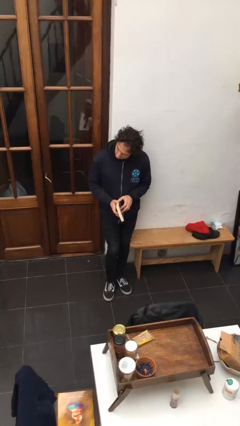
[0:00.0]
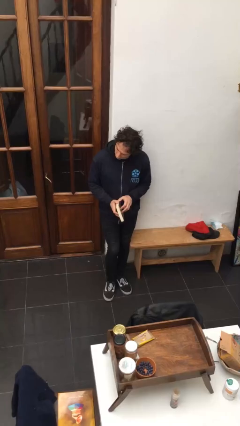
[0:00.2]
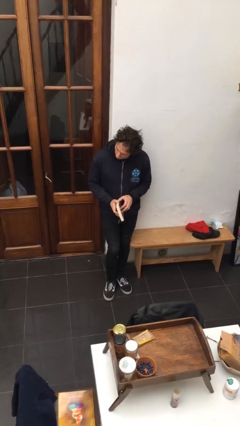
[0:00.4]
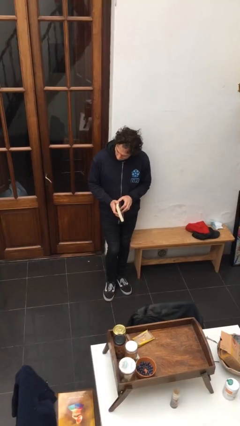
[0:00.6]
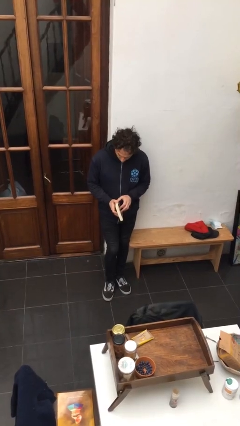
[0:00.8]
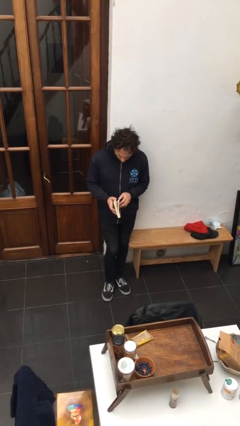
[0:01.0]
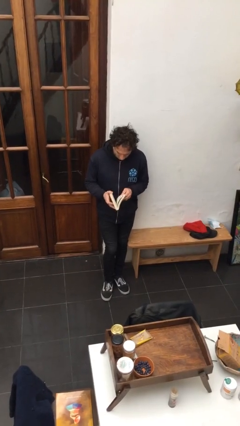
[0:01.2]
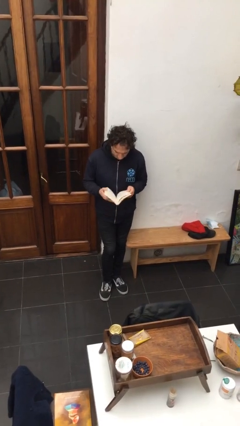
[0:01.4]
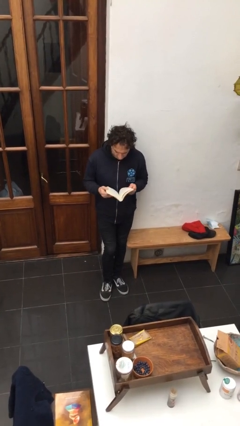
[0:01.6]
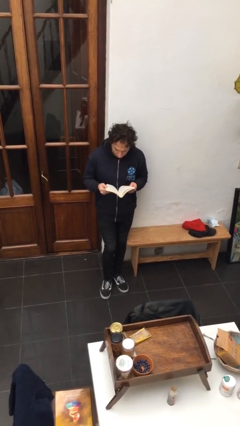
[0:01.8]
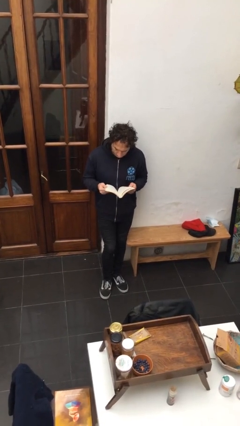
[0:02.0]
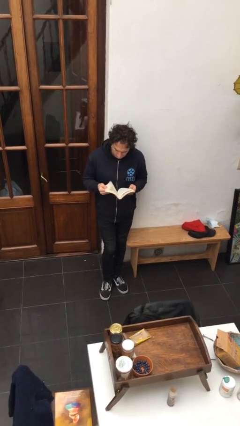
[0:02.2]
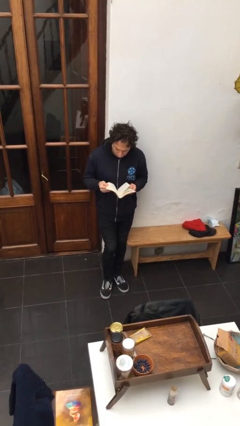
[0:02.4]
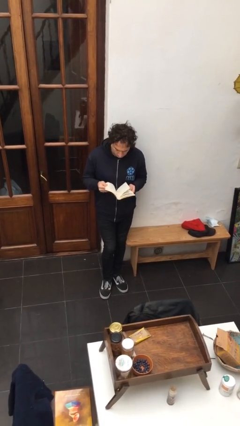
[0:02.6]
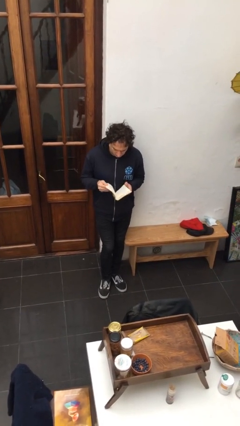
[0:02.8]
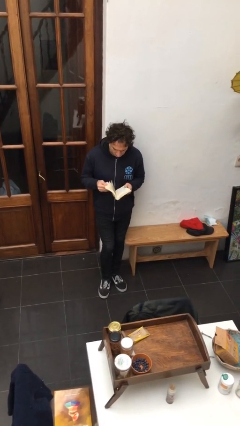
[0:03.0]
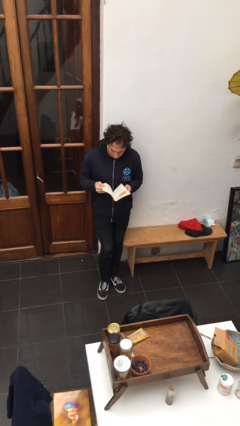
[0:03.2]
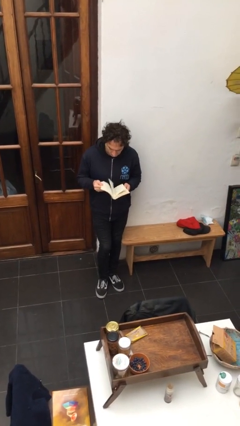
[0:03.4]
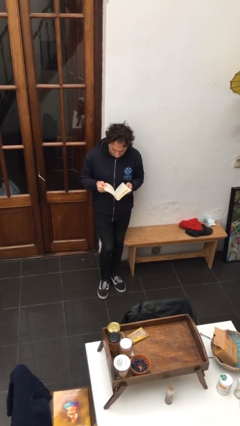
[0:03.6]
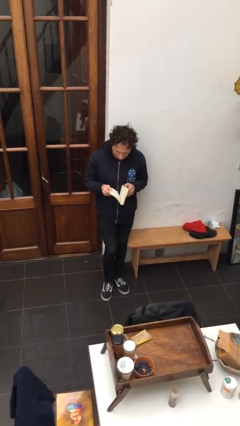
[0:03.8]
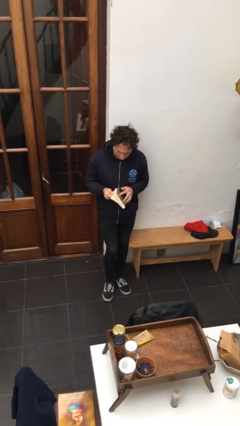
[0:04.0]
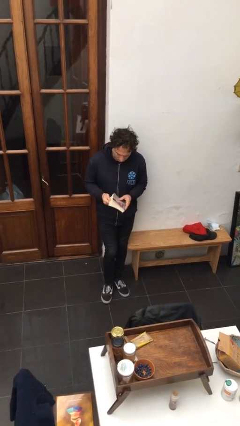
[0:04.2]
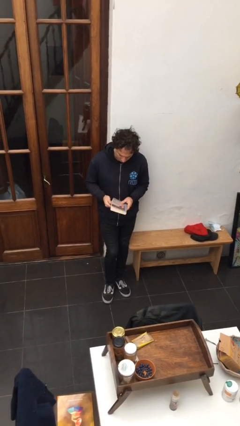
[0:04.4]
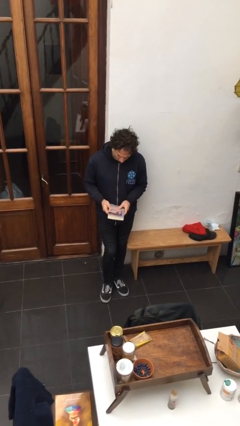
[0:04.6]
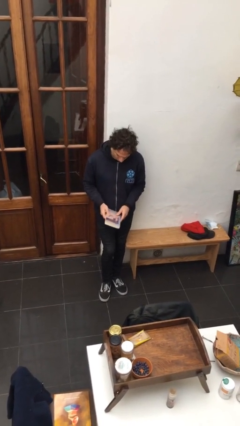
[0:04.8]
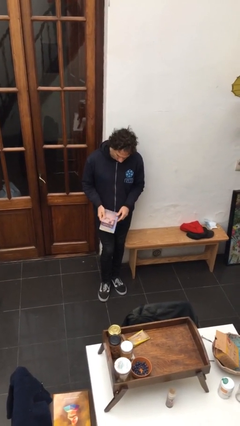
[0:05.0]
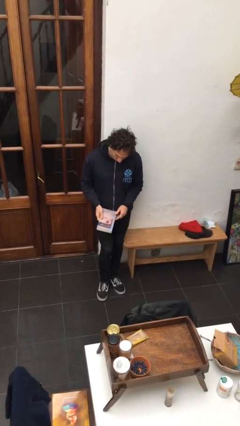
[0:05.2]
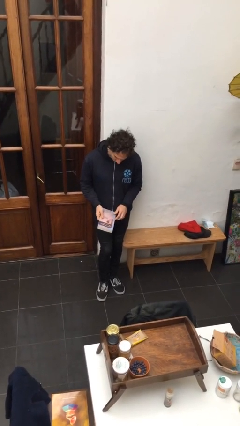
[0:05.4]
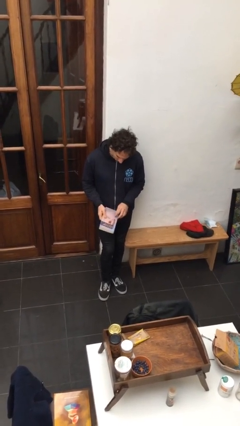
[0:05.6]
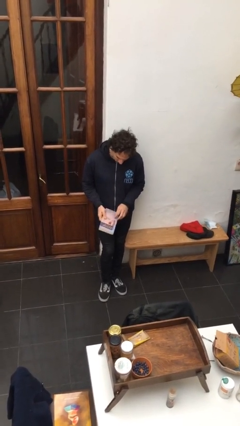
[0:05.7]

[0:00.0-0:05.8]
person reads book

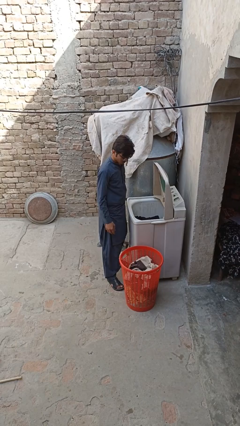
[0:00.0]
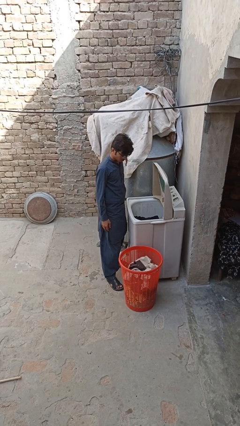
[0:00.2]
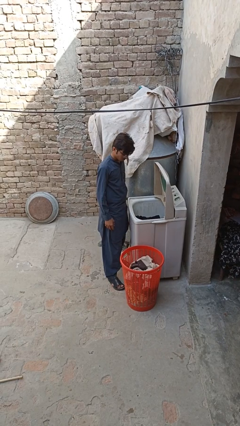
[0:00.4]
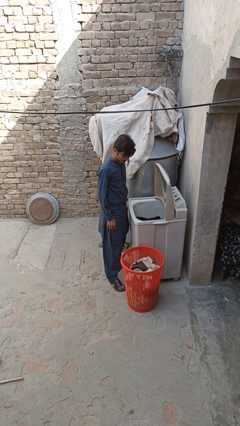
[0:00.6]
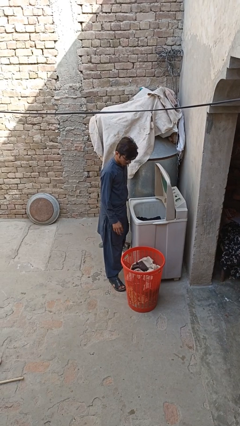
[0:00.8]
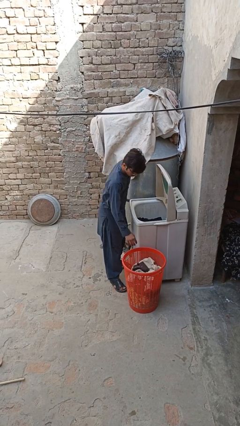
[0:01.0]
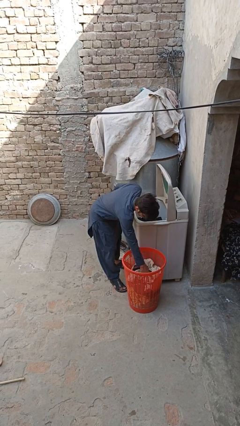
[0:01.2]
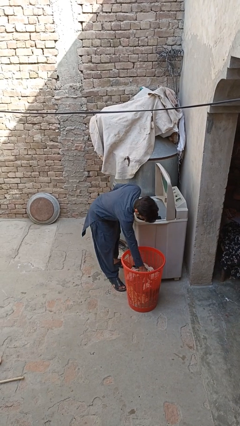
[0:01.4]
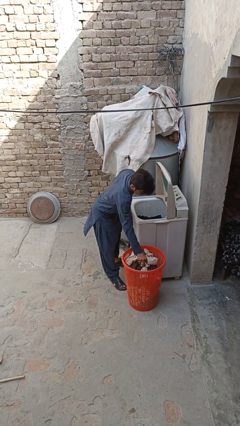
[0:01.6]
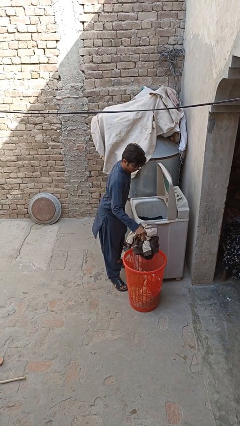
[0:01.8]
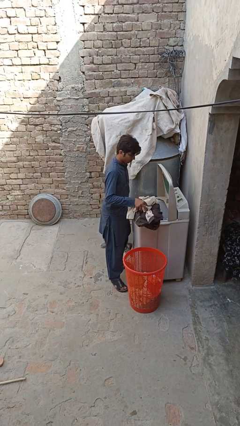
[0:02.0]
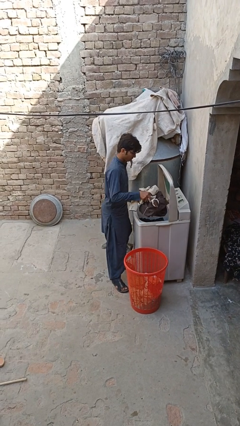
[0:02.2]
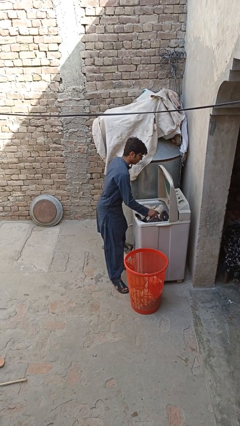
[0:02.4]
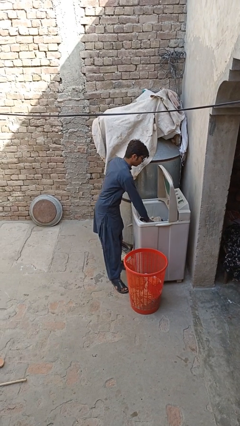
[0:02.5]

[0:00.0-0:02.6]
person loads clotheswasher

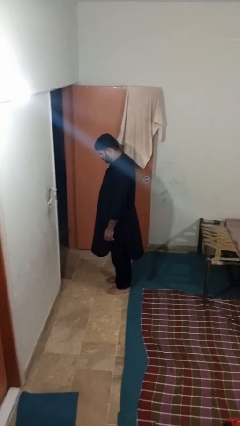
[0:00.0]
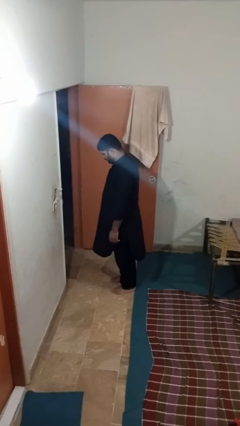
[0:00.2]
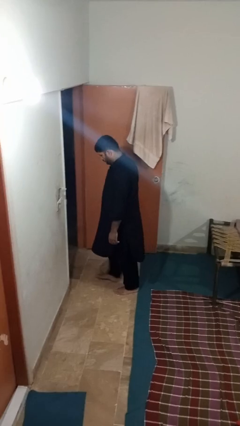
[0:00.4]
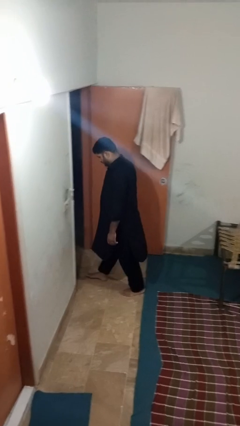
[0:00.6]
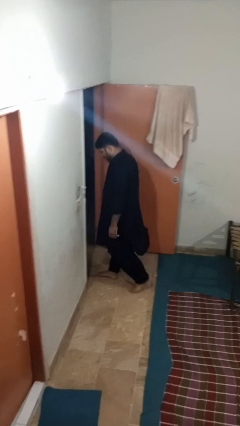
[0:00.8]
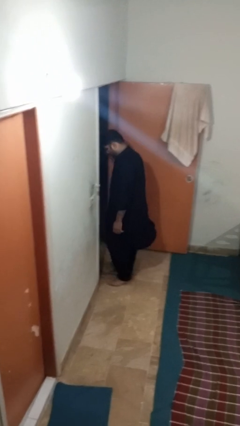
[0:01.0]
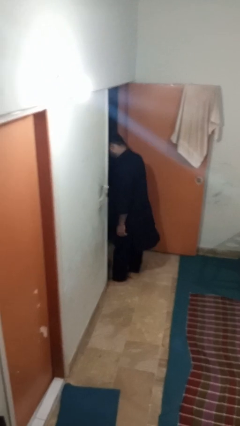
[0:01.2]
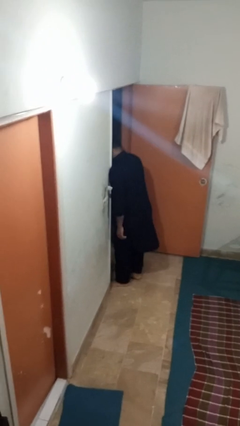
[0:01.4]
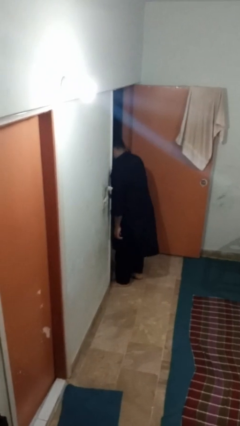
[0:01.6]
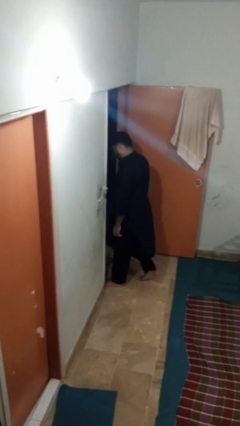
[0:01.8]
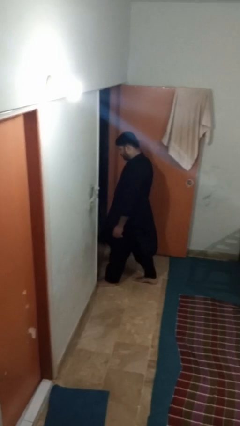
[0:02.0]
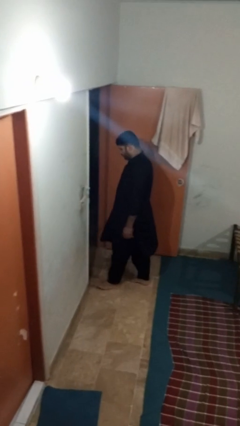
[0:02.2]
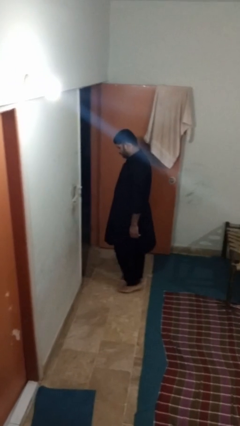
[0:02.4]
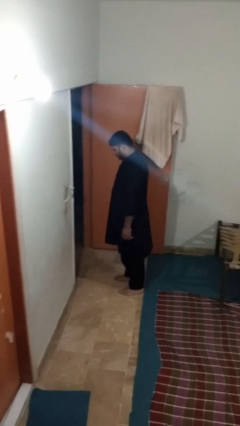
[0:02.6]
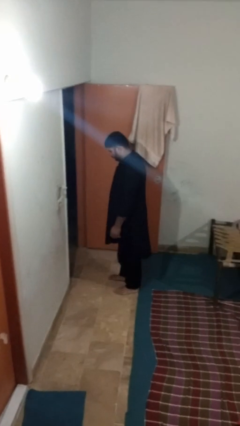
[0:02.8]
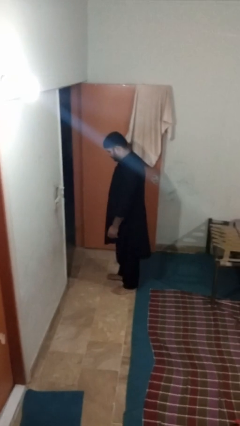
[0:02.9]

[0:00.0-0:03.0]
person bumps into wall

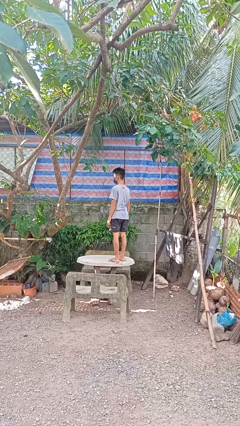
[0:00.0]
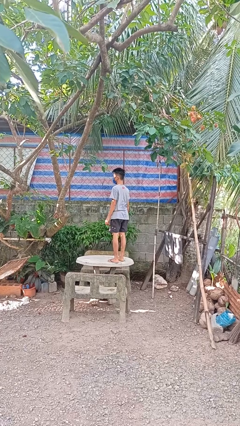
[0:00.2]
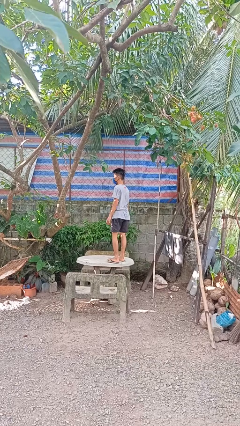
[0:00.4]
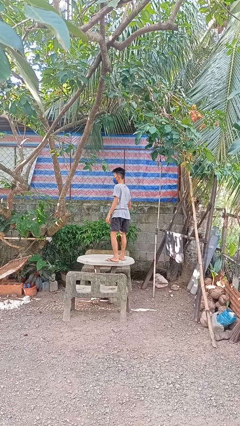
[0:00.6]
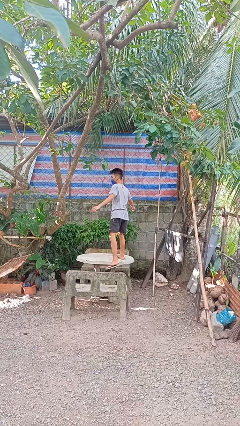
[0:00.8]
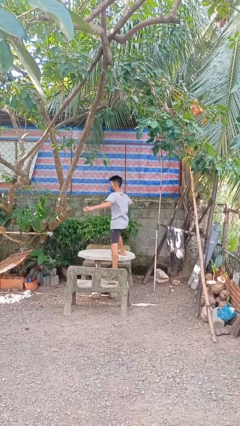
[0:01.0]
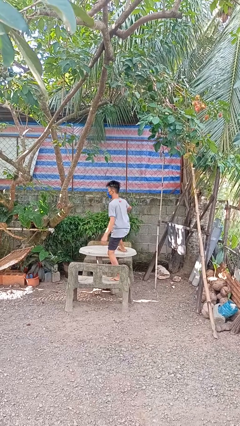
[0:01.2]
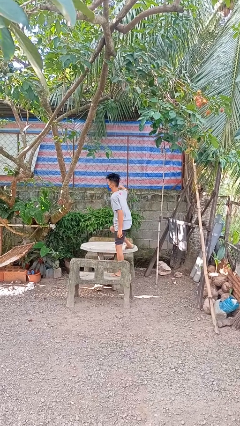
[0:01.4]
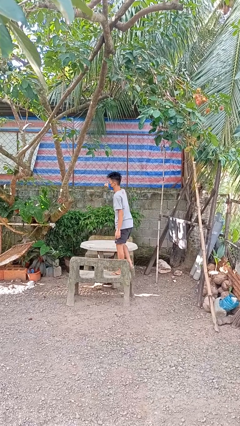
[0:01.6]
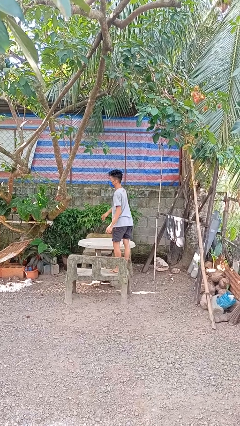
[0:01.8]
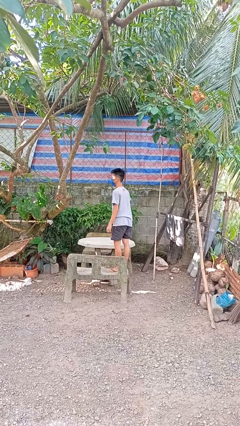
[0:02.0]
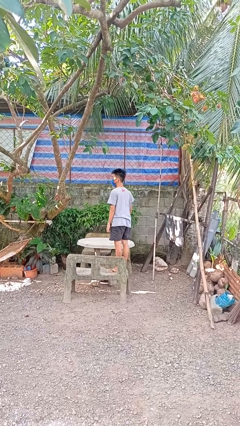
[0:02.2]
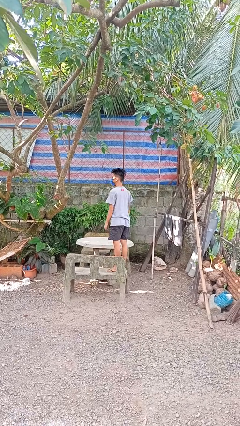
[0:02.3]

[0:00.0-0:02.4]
person climbs off table

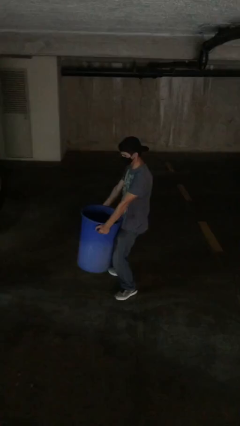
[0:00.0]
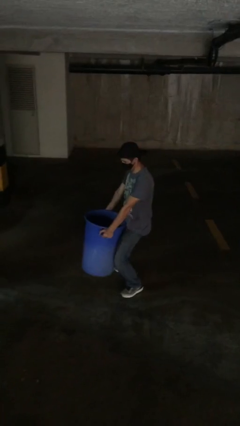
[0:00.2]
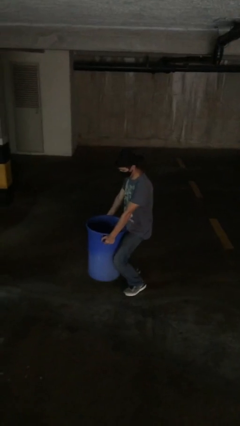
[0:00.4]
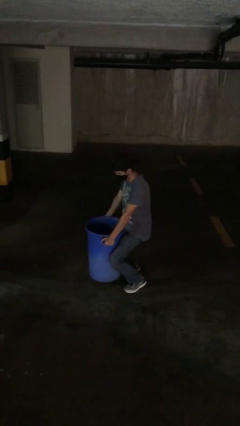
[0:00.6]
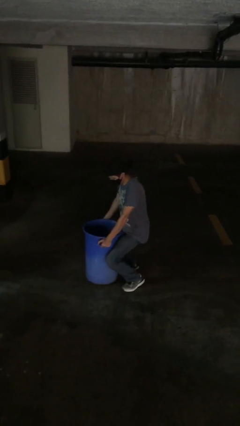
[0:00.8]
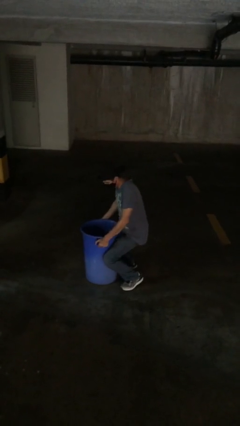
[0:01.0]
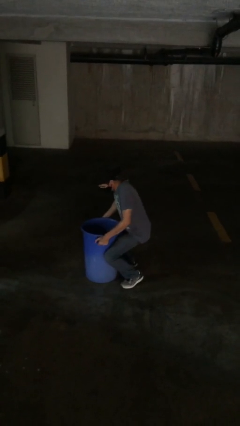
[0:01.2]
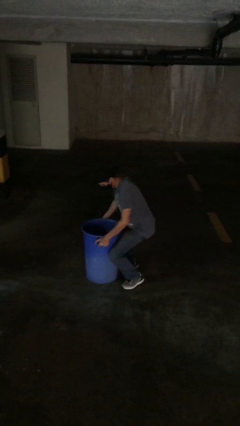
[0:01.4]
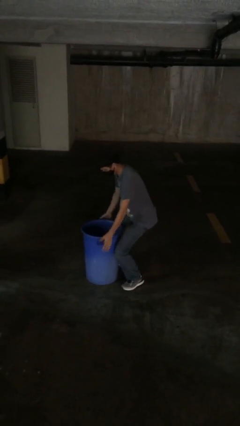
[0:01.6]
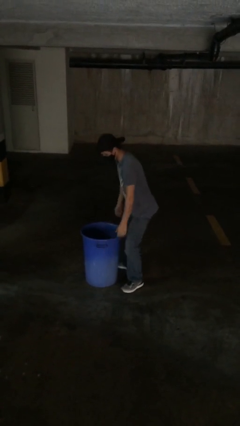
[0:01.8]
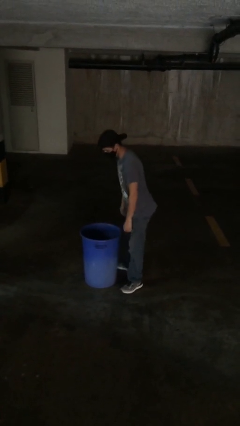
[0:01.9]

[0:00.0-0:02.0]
person puts down object on floor

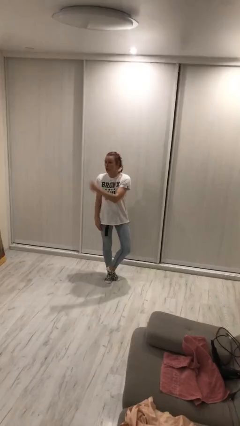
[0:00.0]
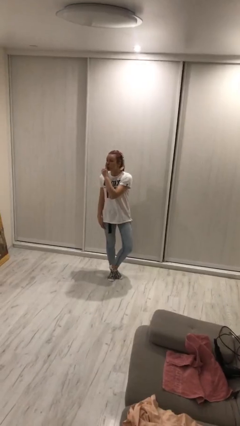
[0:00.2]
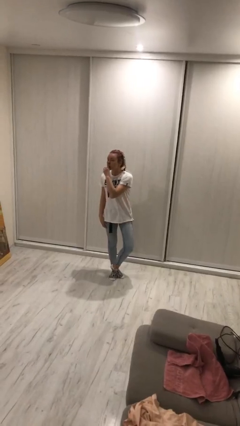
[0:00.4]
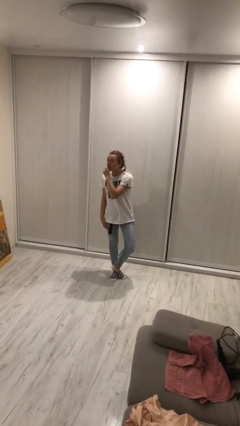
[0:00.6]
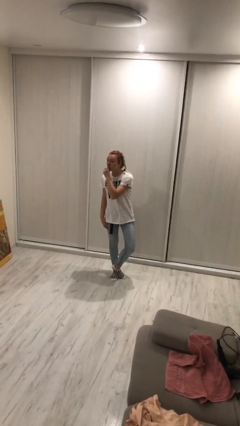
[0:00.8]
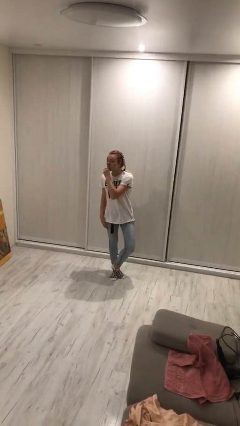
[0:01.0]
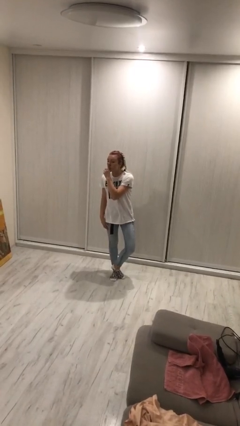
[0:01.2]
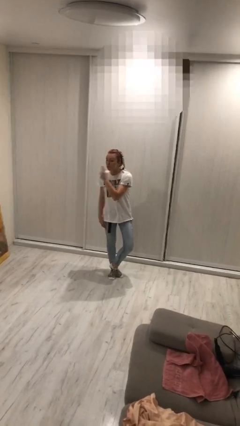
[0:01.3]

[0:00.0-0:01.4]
person gestures be quiet
